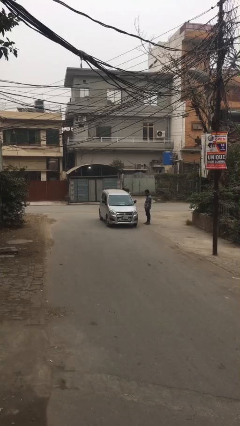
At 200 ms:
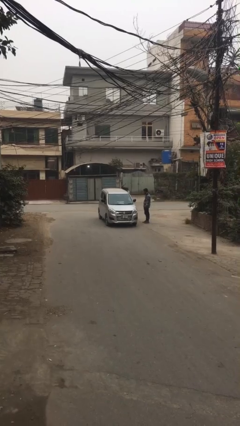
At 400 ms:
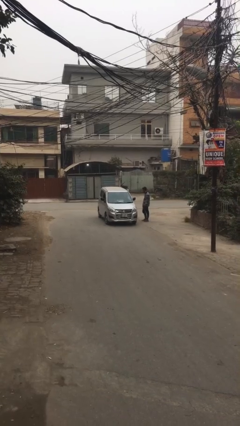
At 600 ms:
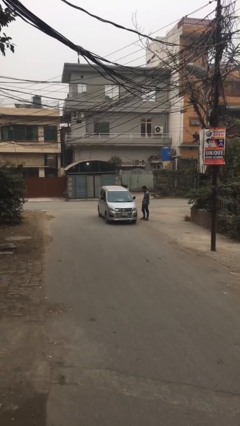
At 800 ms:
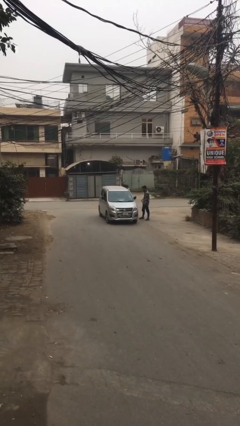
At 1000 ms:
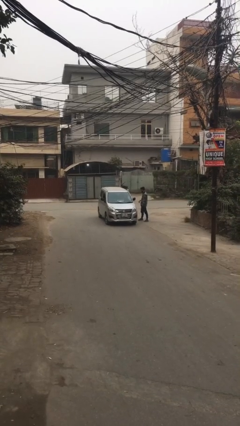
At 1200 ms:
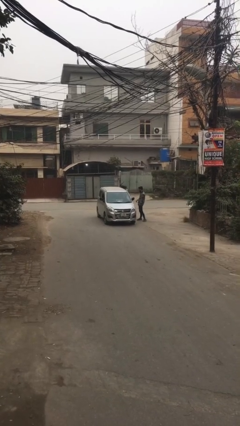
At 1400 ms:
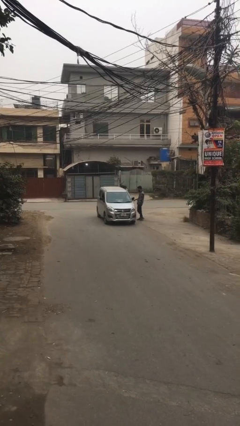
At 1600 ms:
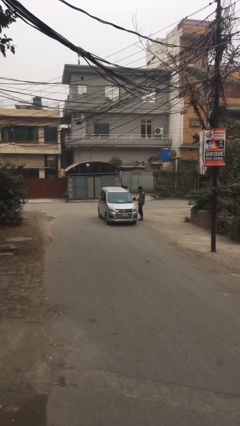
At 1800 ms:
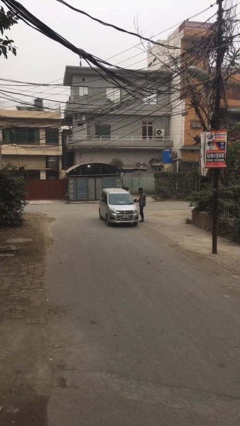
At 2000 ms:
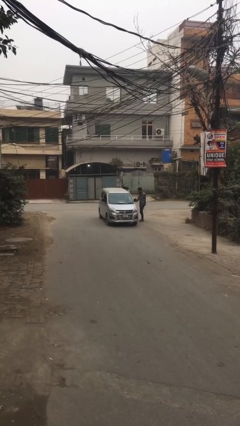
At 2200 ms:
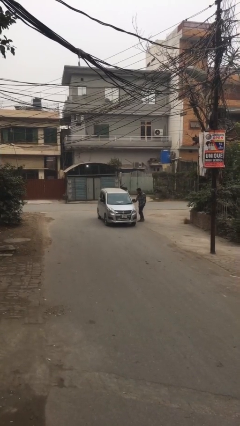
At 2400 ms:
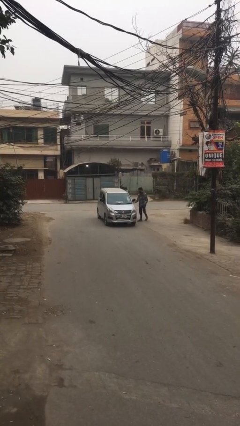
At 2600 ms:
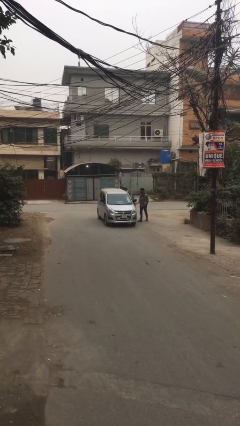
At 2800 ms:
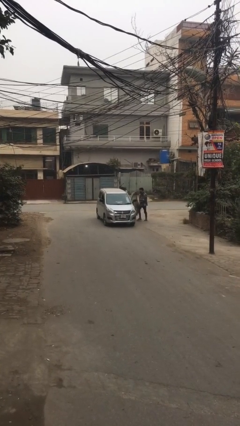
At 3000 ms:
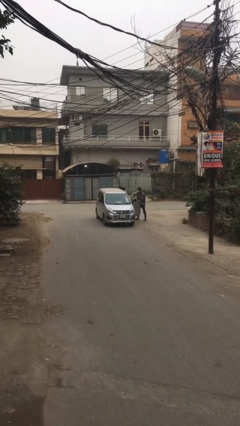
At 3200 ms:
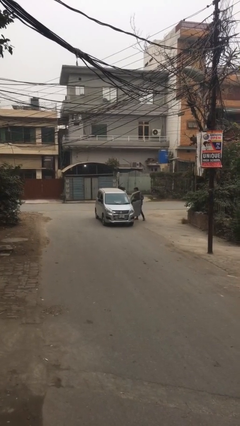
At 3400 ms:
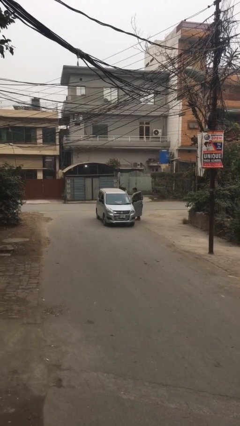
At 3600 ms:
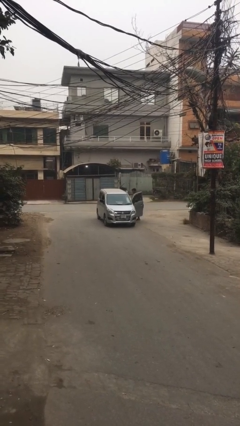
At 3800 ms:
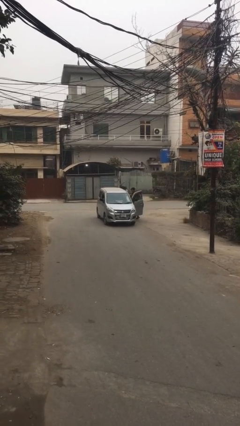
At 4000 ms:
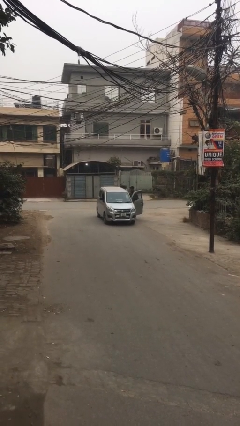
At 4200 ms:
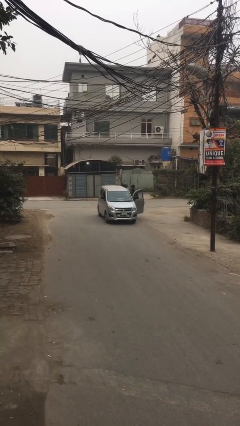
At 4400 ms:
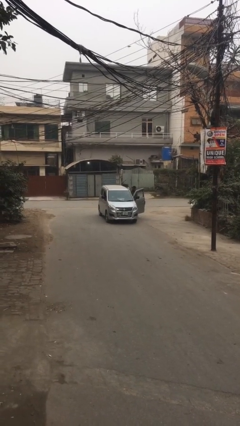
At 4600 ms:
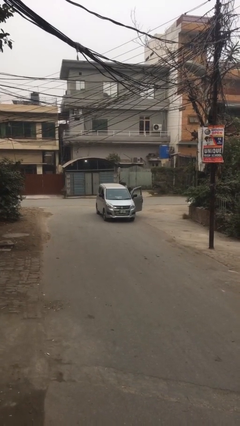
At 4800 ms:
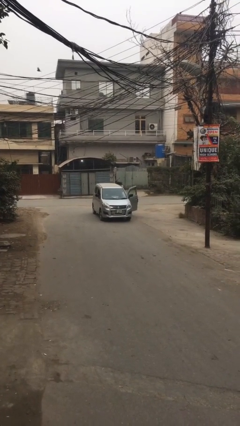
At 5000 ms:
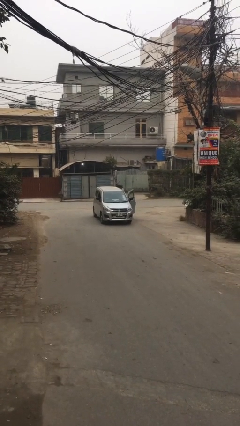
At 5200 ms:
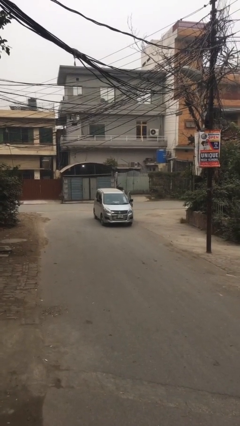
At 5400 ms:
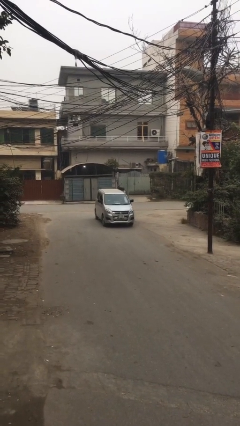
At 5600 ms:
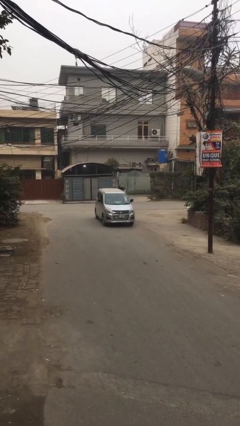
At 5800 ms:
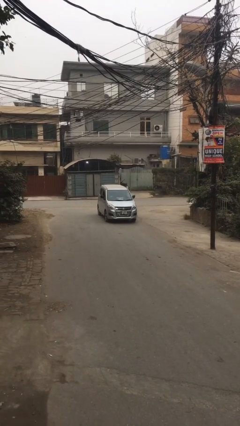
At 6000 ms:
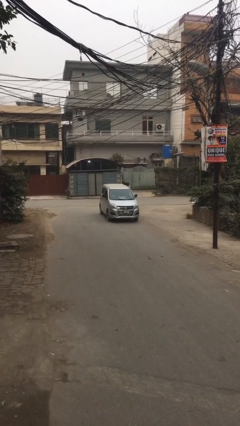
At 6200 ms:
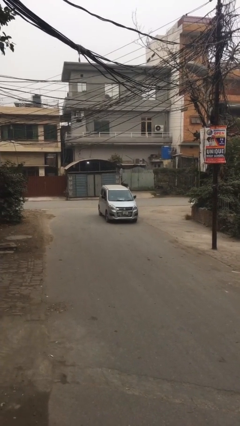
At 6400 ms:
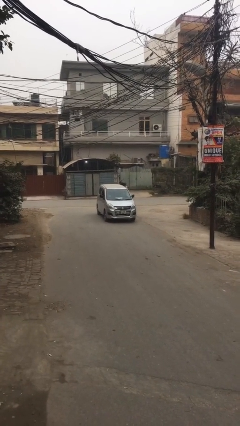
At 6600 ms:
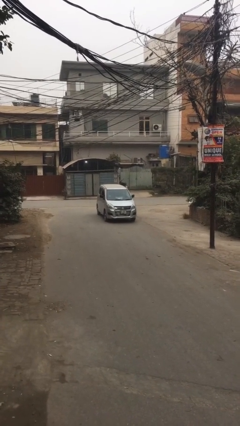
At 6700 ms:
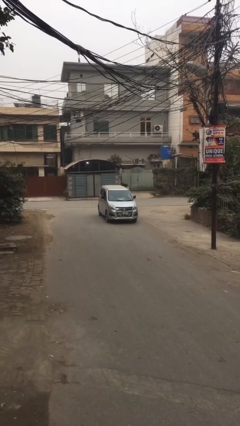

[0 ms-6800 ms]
car picks up person

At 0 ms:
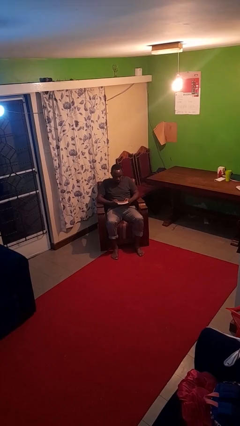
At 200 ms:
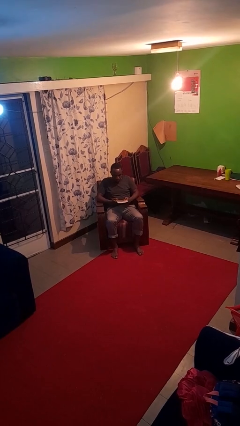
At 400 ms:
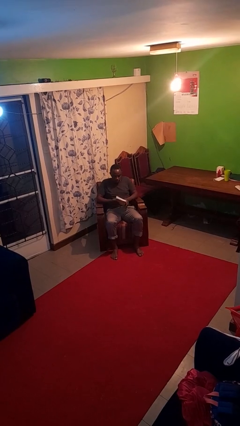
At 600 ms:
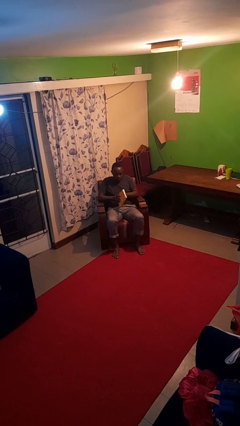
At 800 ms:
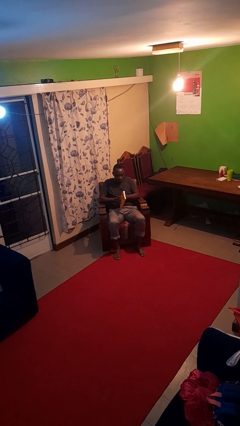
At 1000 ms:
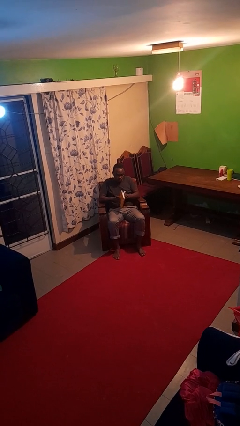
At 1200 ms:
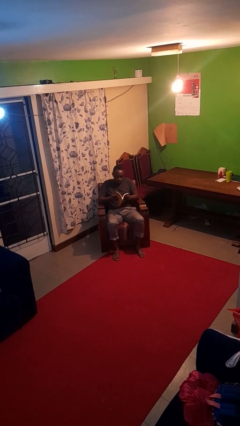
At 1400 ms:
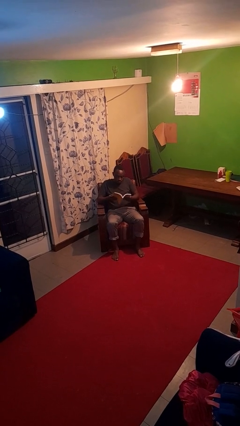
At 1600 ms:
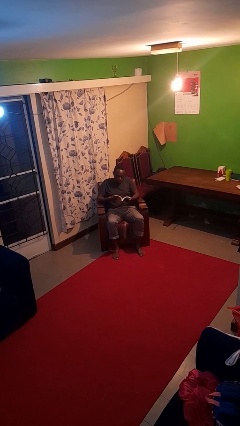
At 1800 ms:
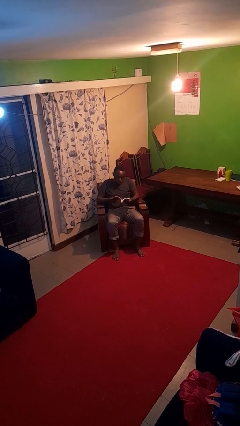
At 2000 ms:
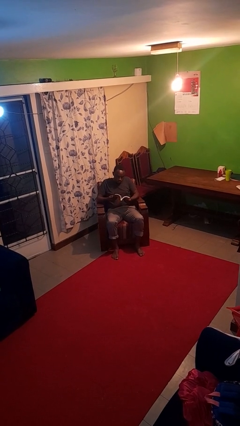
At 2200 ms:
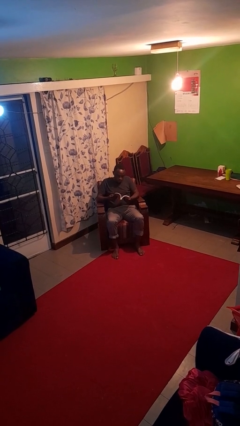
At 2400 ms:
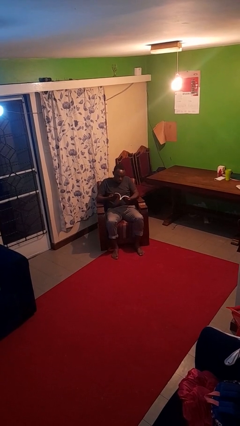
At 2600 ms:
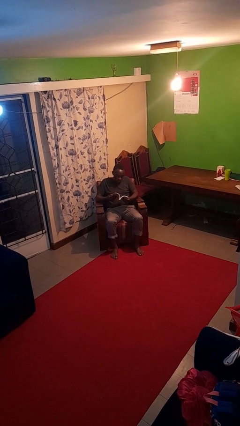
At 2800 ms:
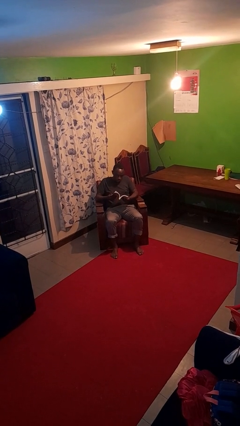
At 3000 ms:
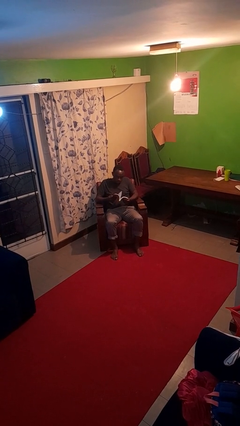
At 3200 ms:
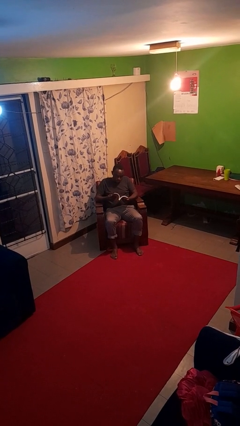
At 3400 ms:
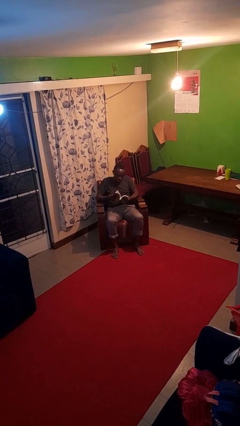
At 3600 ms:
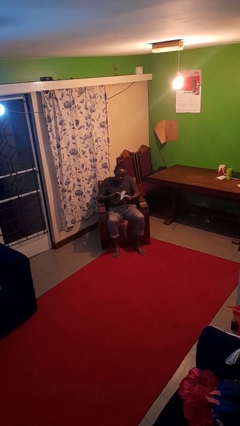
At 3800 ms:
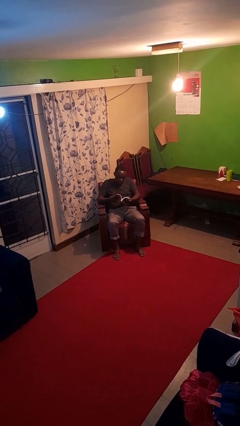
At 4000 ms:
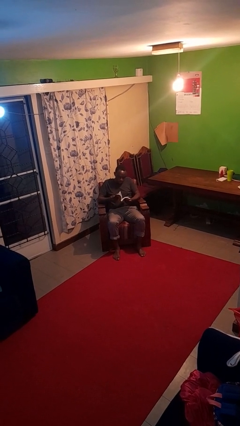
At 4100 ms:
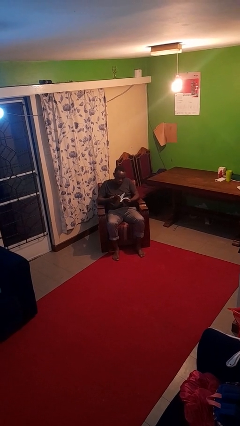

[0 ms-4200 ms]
person reads book

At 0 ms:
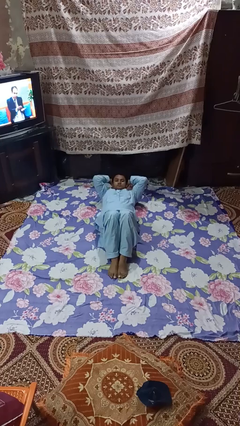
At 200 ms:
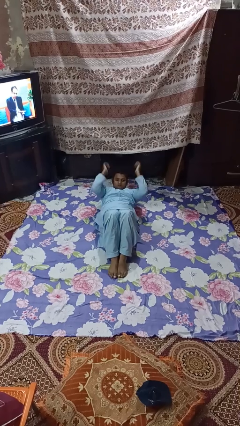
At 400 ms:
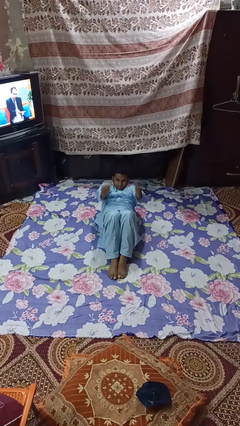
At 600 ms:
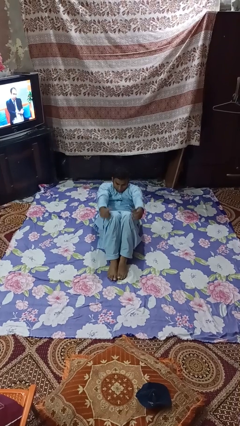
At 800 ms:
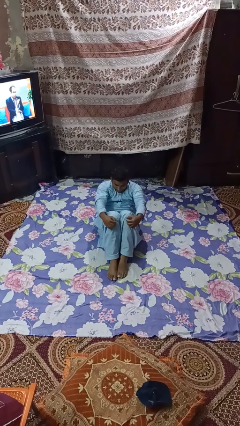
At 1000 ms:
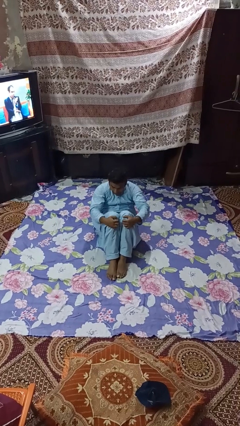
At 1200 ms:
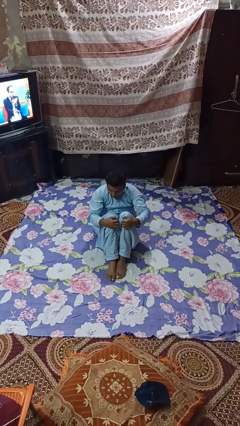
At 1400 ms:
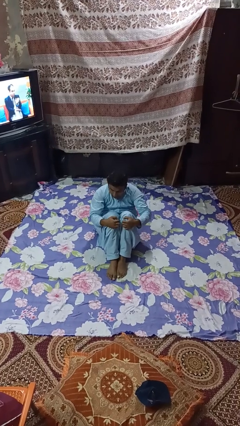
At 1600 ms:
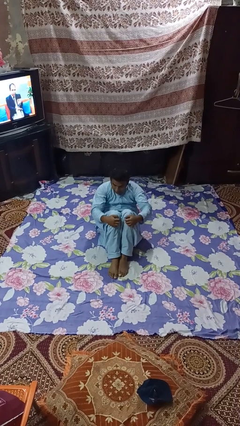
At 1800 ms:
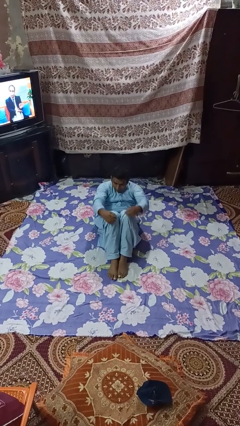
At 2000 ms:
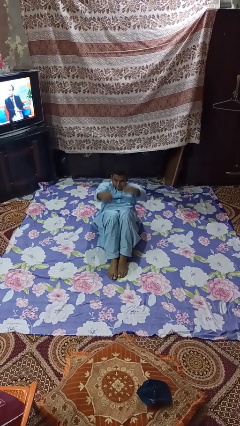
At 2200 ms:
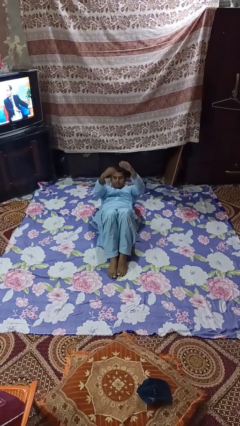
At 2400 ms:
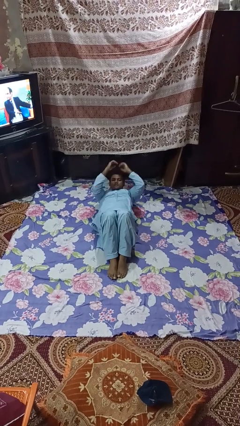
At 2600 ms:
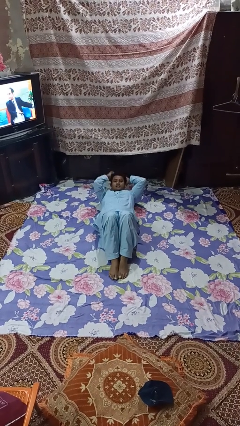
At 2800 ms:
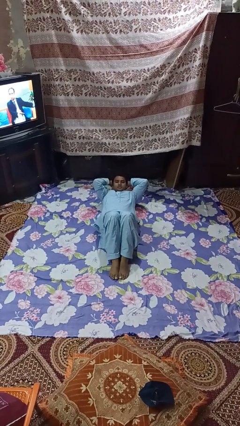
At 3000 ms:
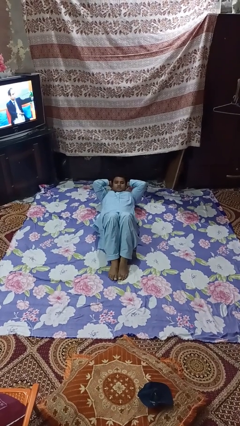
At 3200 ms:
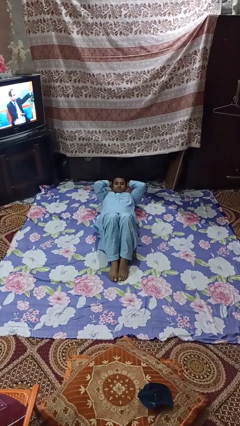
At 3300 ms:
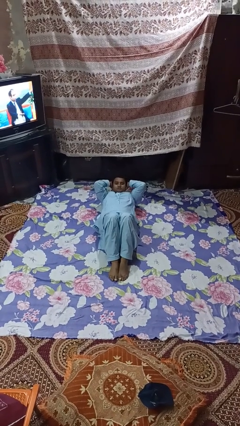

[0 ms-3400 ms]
person exercises with situp

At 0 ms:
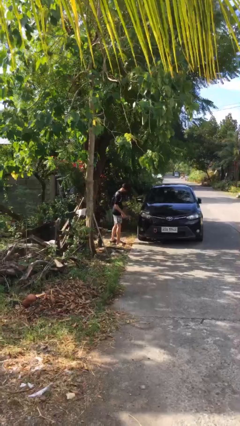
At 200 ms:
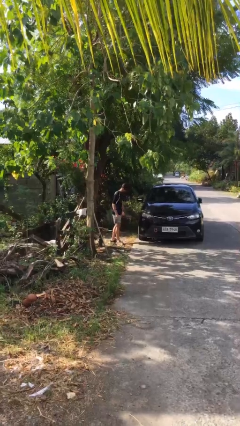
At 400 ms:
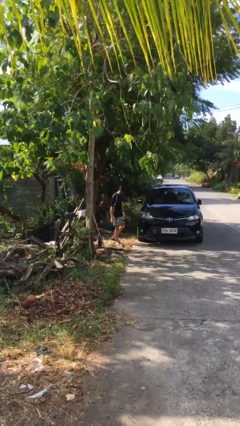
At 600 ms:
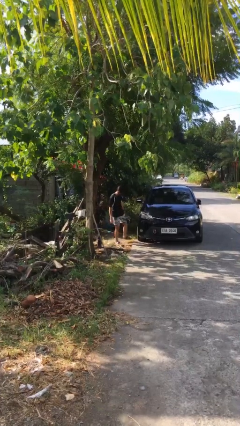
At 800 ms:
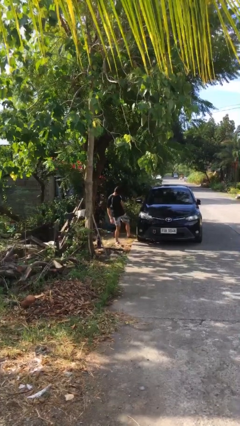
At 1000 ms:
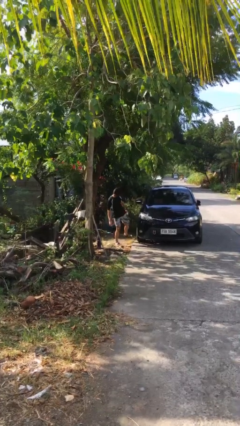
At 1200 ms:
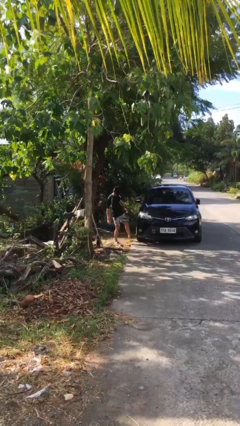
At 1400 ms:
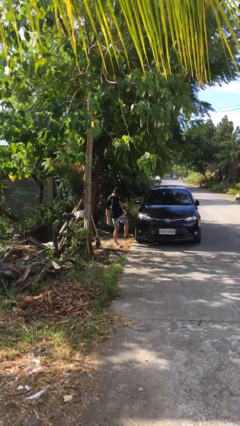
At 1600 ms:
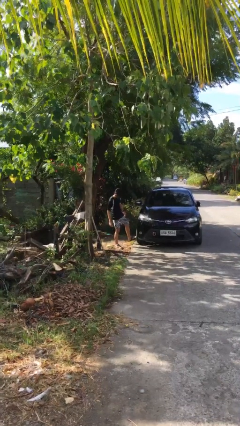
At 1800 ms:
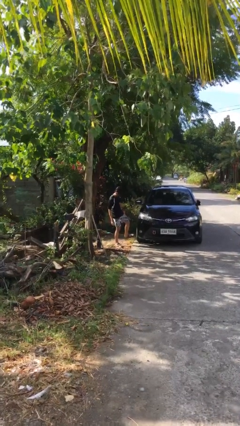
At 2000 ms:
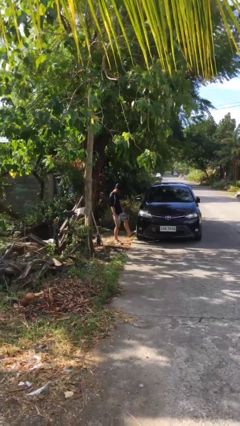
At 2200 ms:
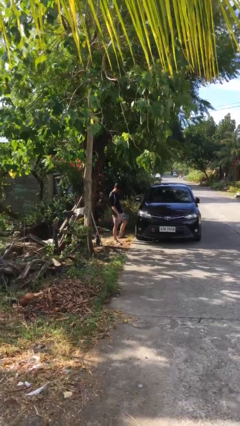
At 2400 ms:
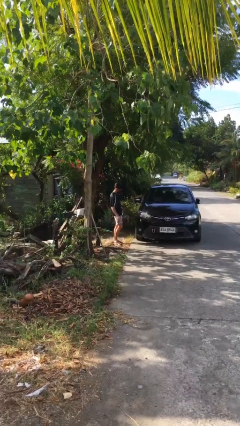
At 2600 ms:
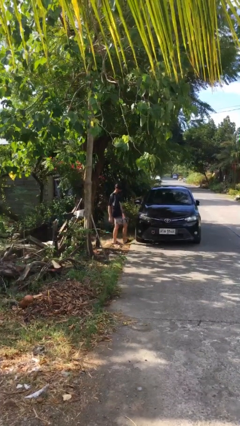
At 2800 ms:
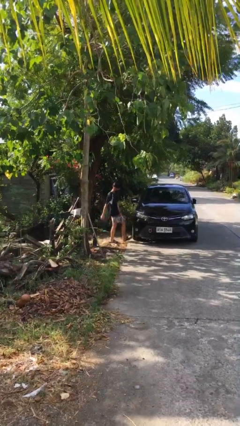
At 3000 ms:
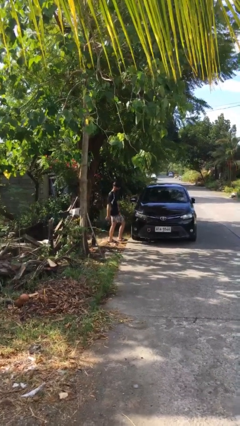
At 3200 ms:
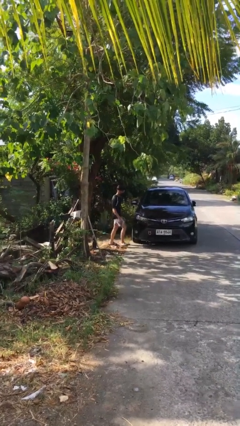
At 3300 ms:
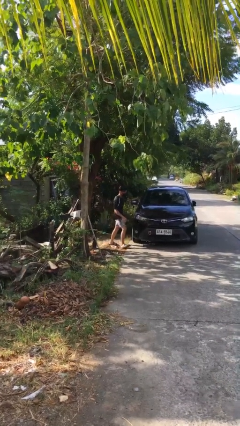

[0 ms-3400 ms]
person kicks car tires
